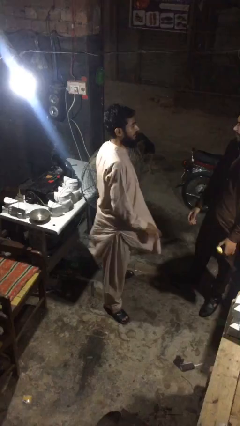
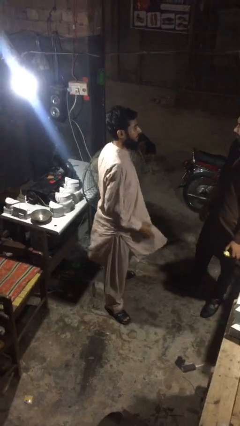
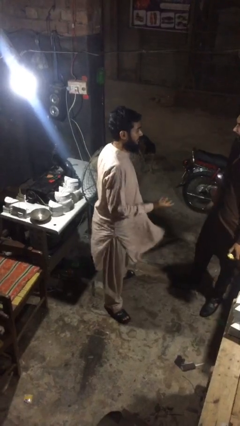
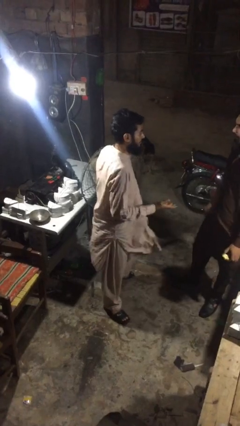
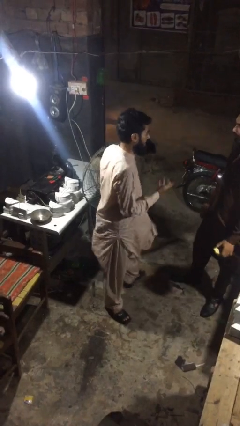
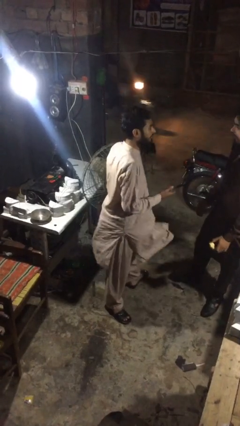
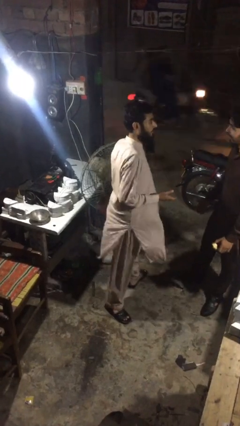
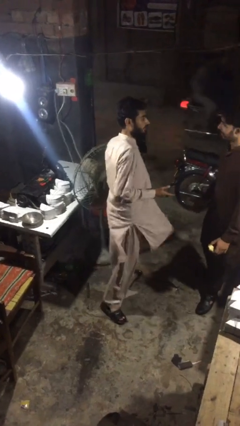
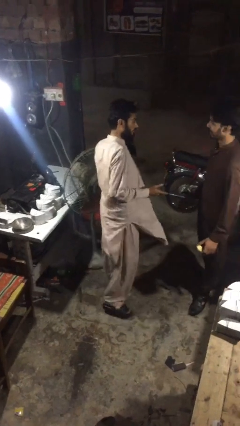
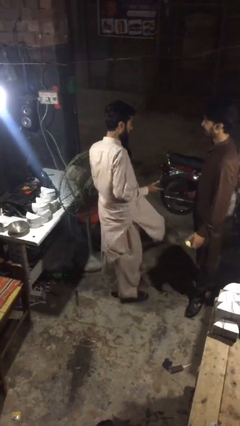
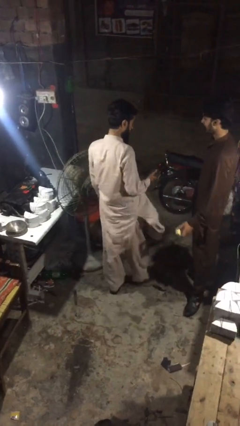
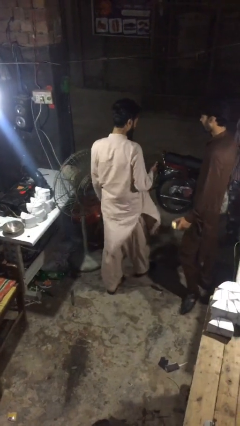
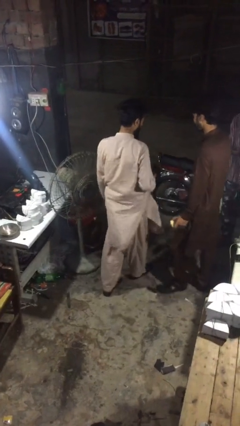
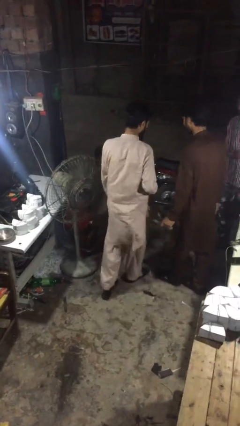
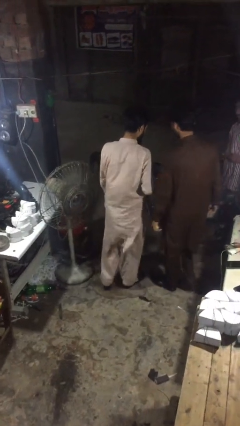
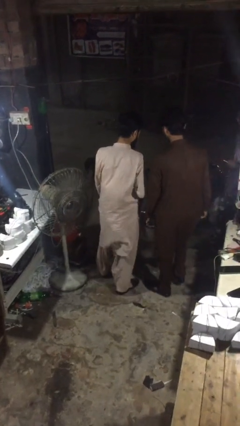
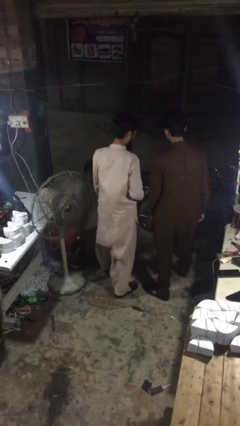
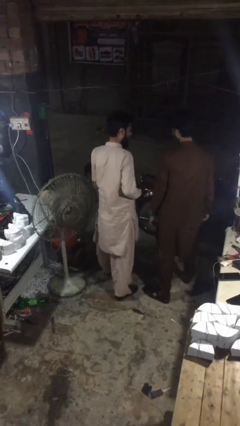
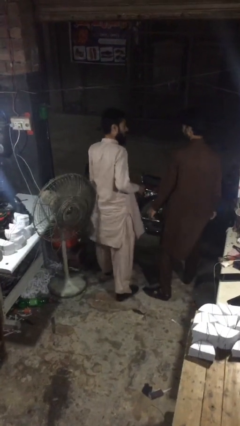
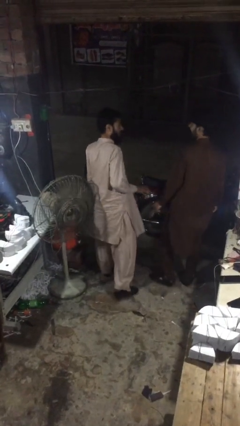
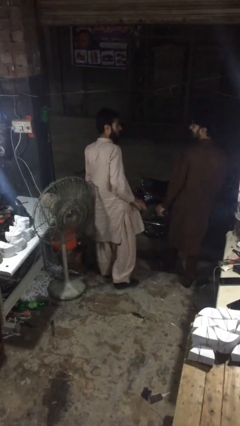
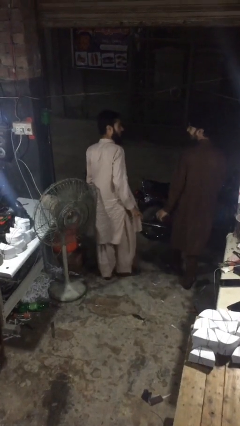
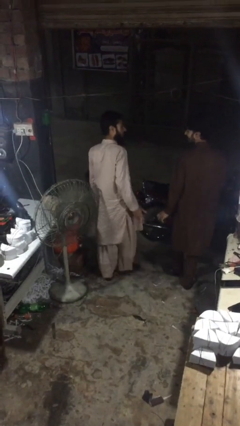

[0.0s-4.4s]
person talks to person

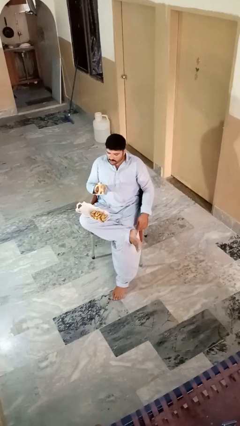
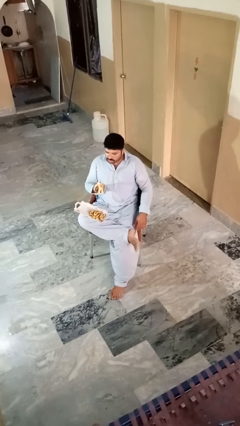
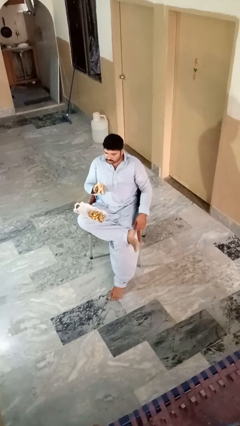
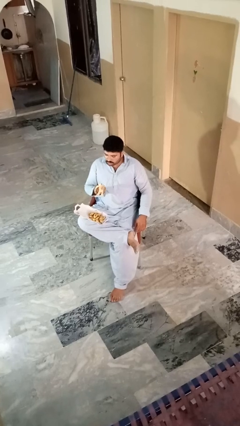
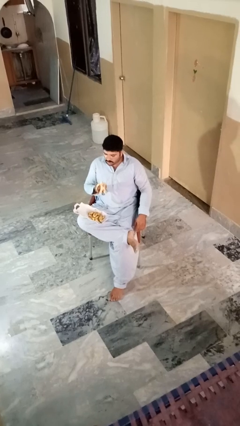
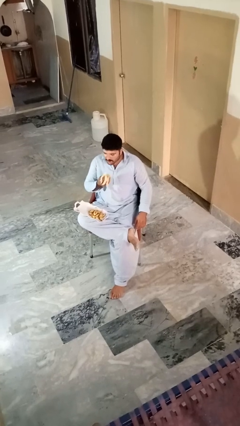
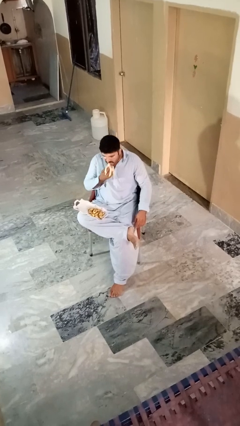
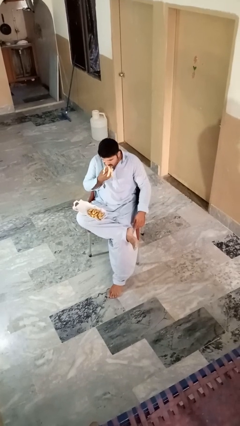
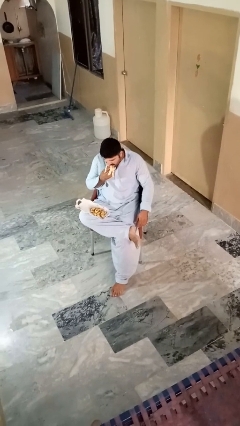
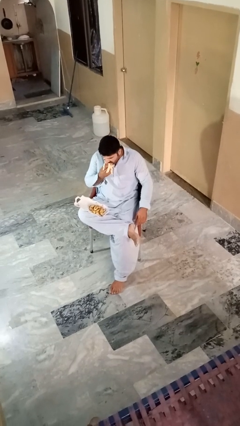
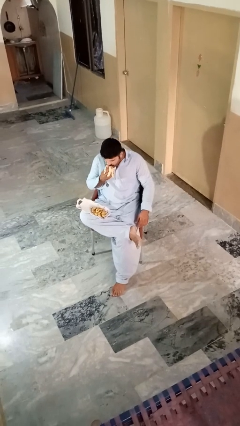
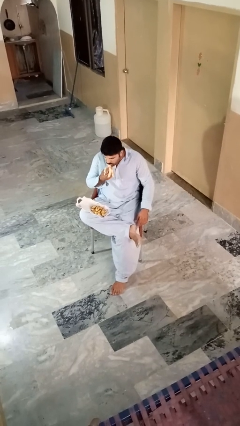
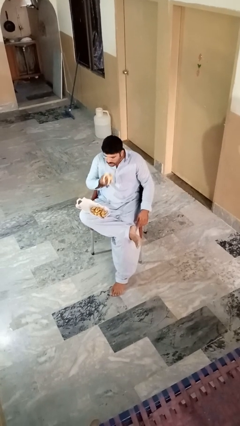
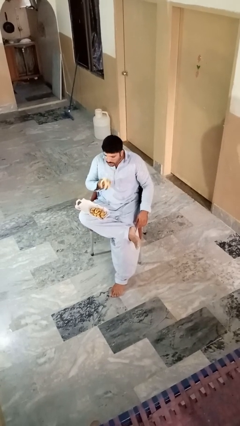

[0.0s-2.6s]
person eats banana

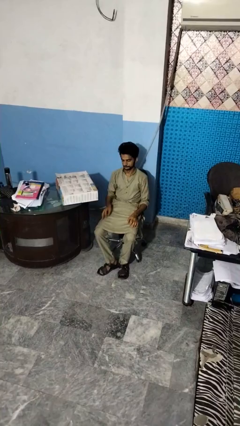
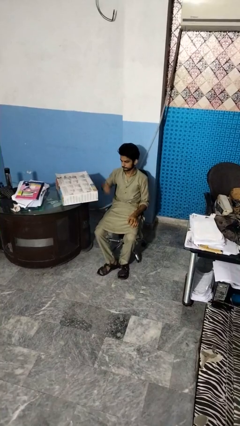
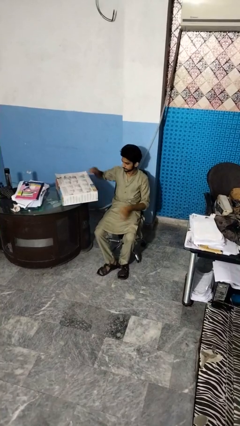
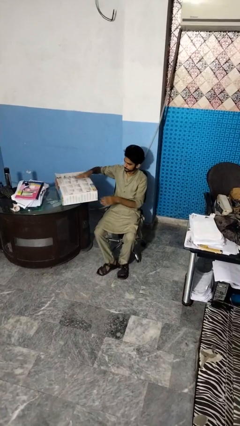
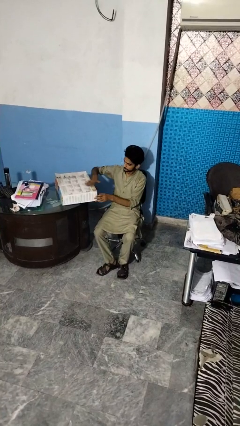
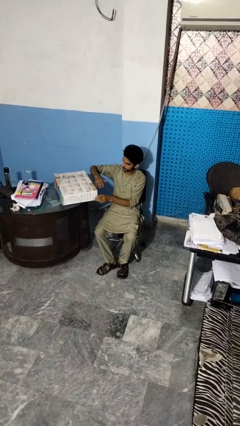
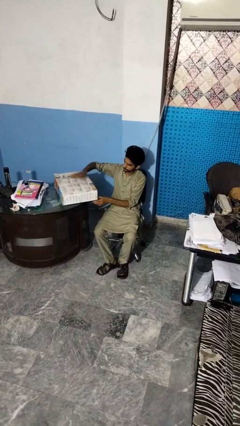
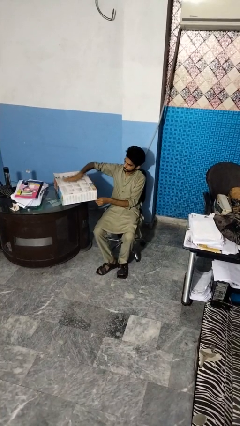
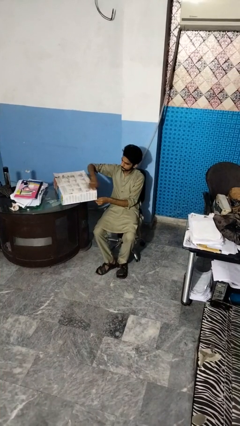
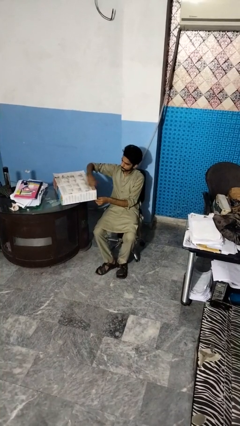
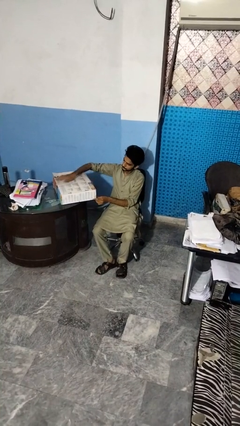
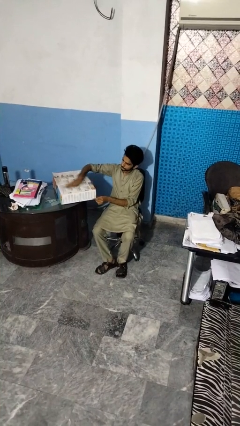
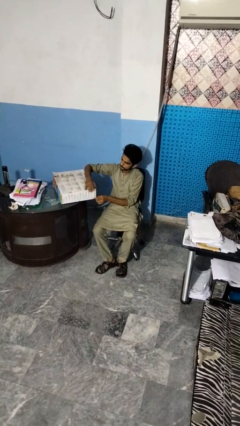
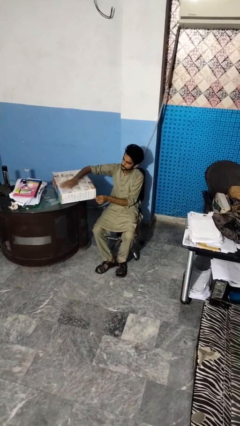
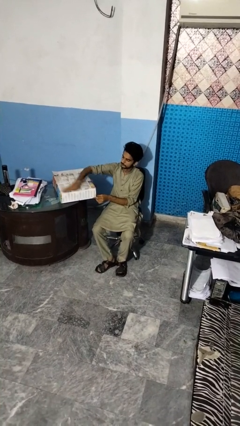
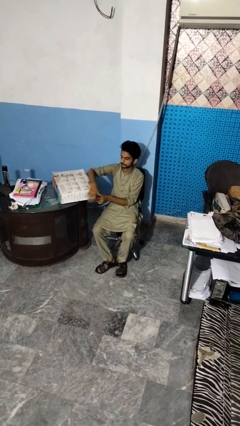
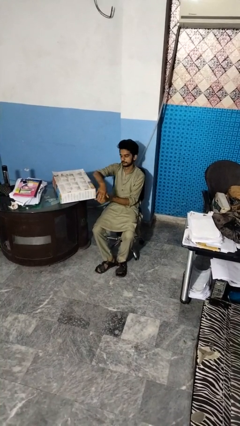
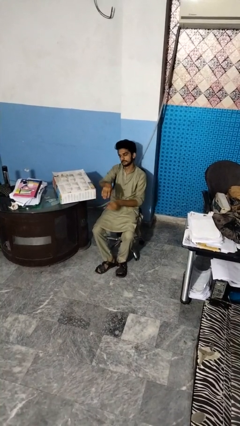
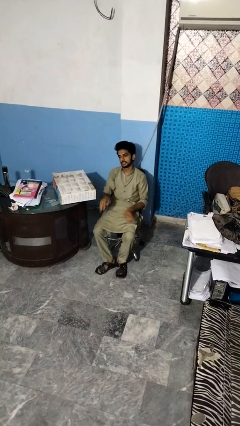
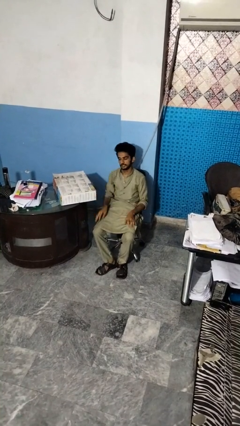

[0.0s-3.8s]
person waves hand over object

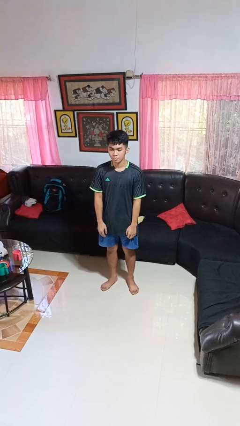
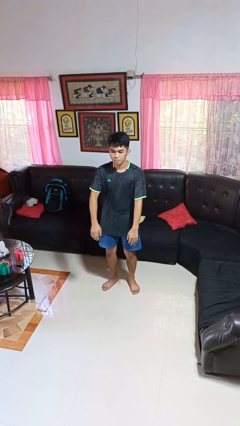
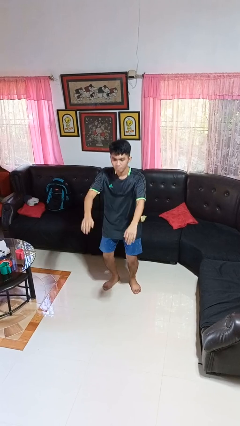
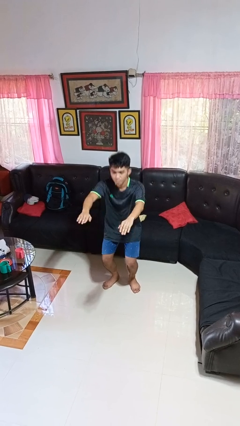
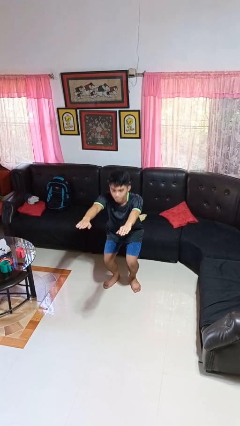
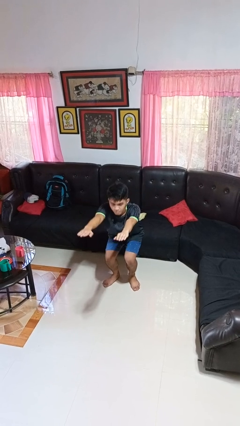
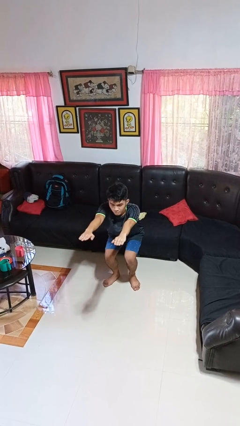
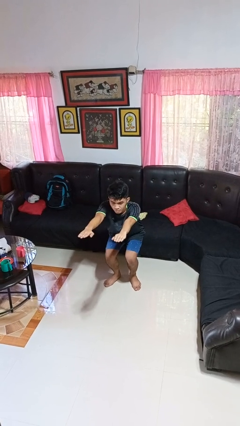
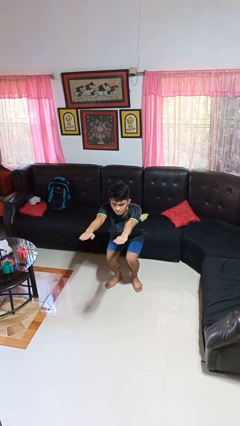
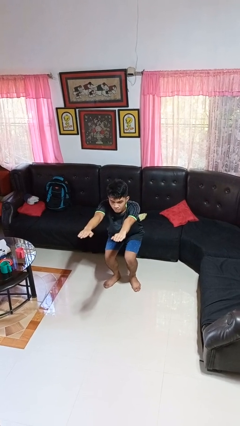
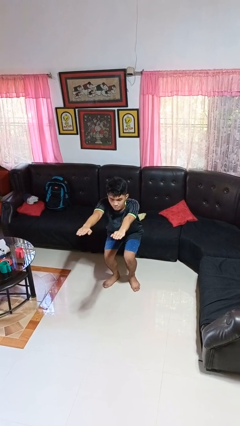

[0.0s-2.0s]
person squats

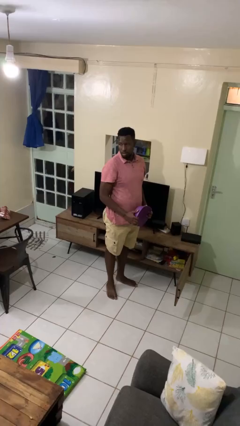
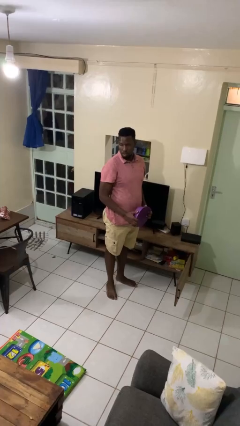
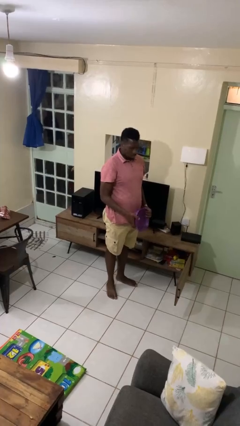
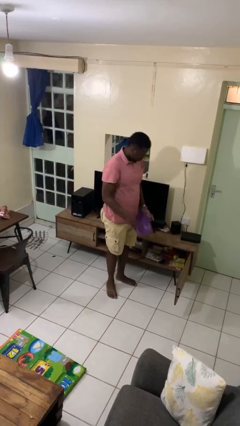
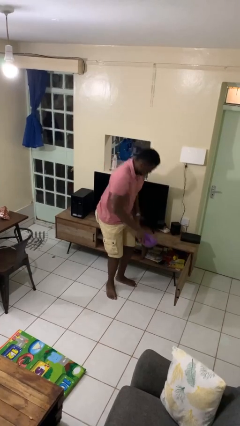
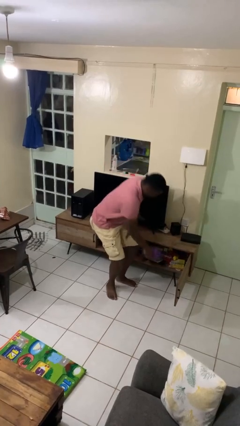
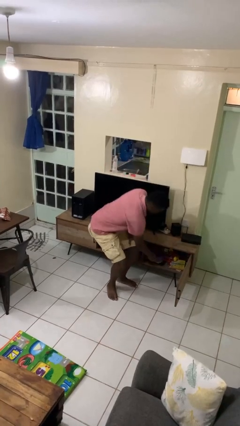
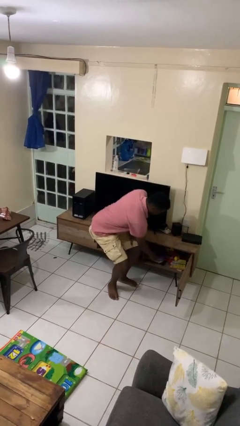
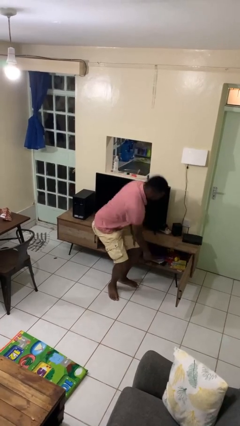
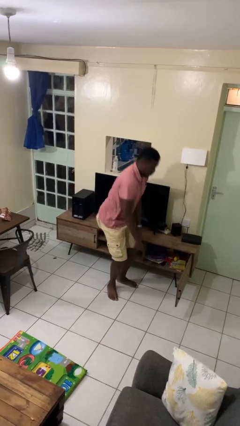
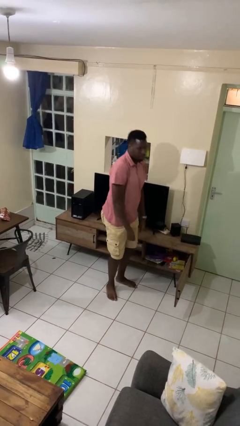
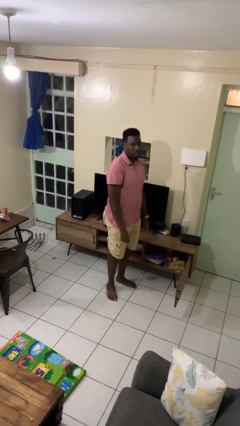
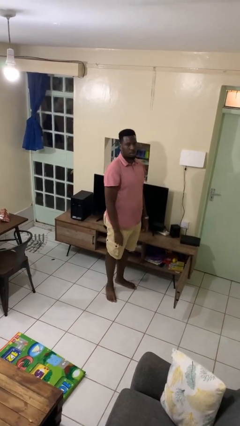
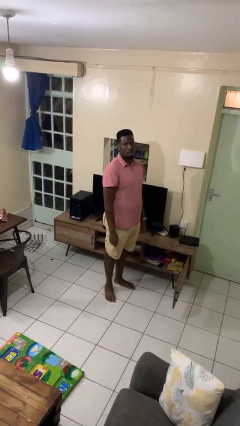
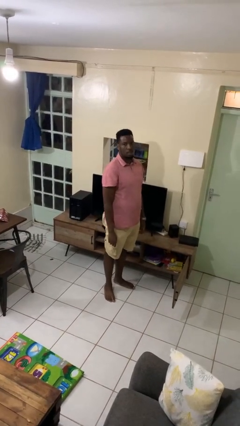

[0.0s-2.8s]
person puts down object into cabinet

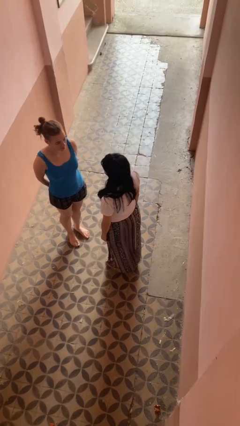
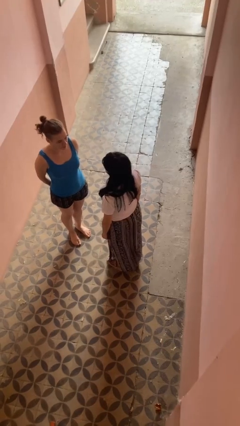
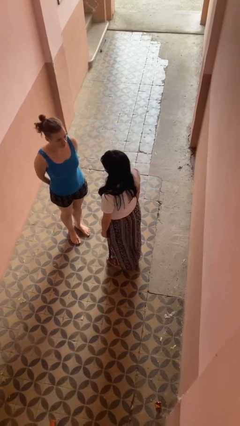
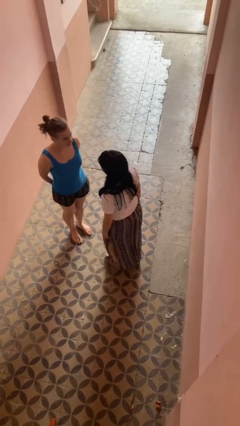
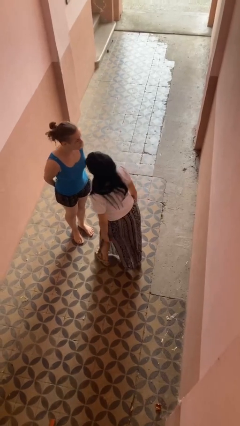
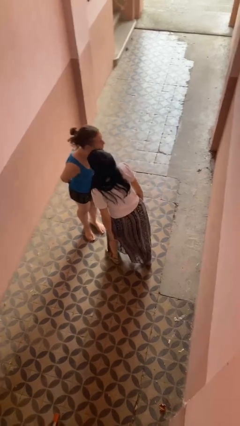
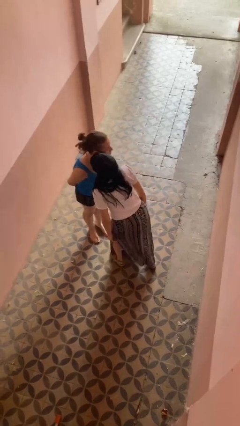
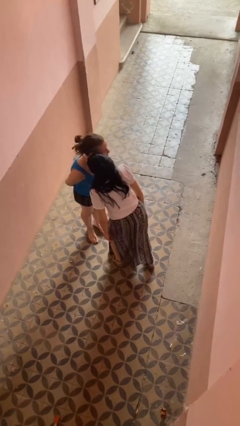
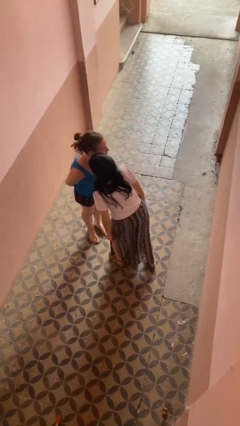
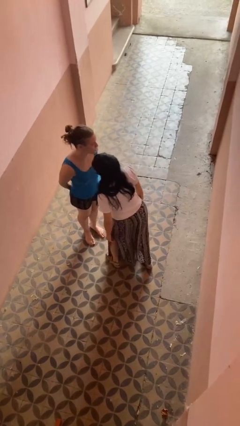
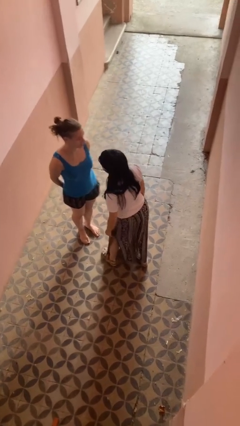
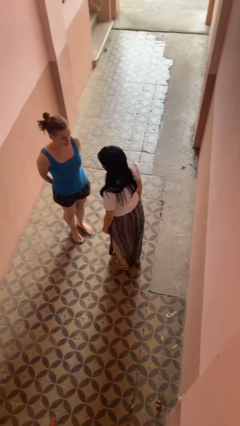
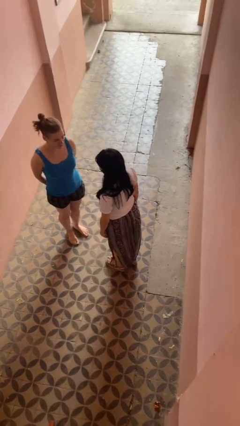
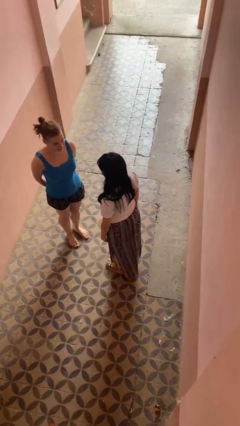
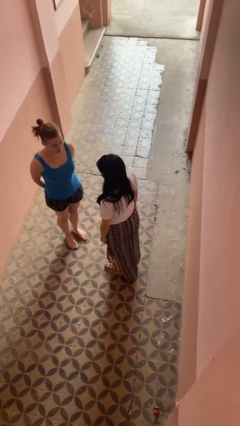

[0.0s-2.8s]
person kisses cheek of person
